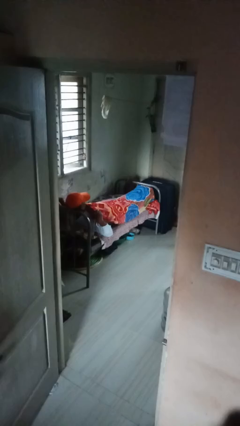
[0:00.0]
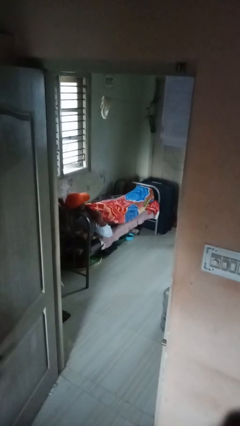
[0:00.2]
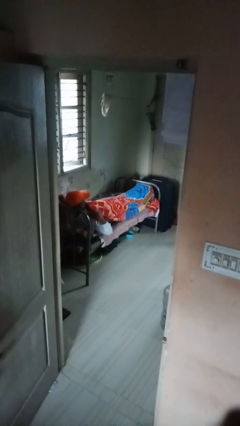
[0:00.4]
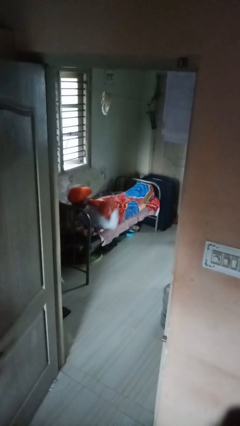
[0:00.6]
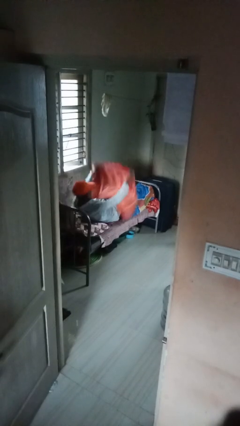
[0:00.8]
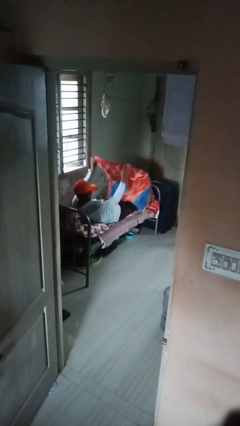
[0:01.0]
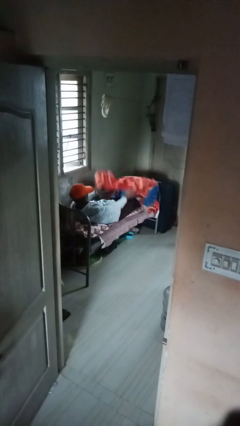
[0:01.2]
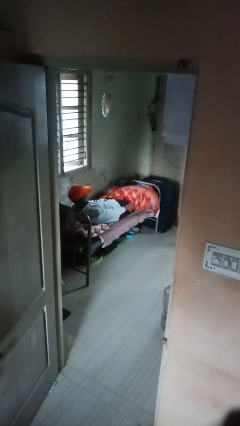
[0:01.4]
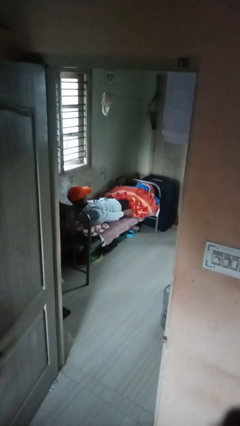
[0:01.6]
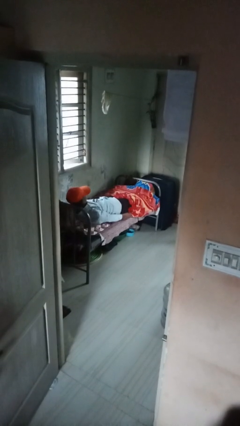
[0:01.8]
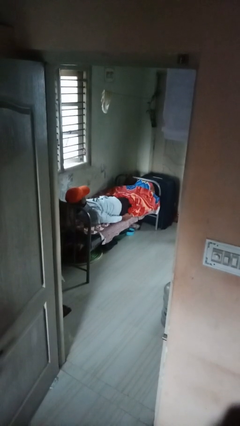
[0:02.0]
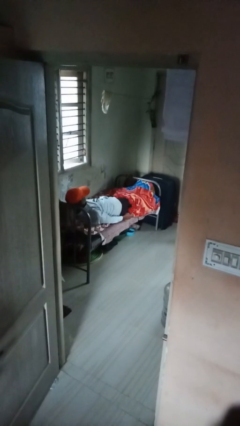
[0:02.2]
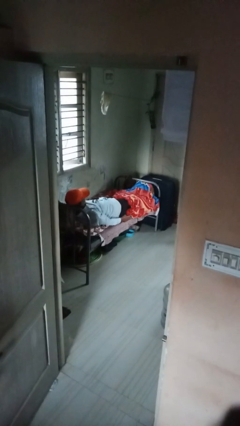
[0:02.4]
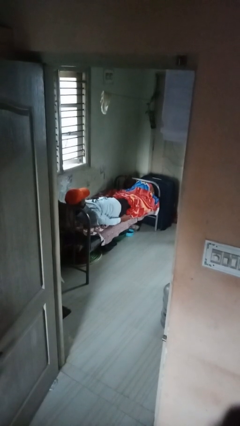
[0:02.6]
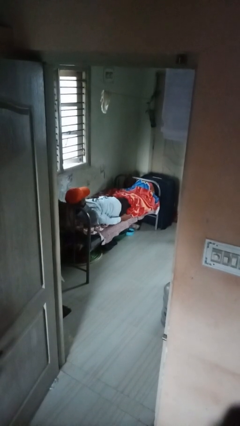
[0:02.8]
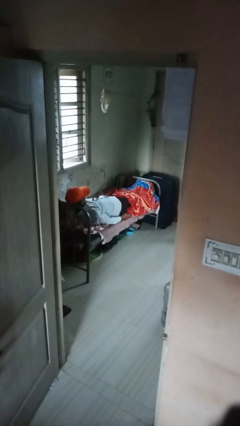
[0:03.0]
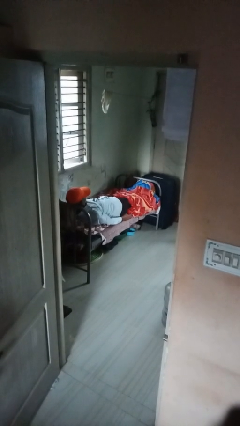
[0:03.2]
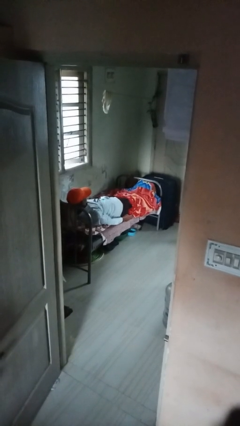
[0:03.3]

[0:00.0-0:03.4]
person uncovers with bedsheets

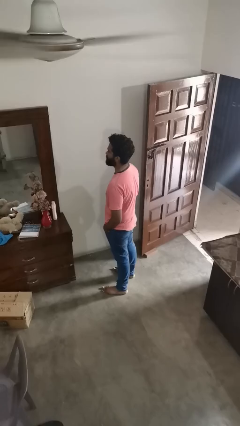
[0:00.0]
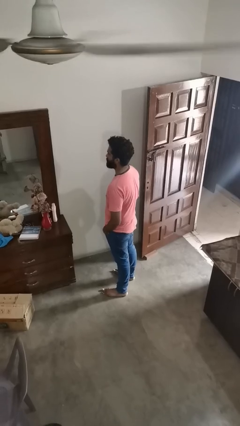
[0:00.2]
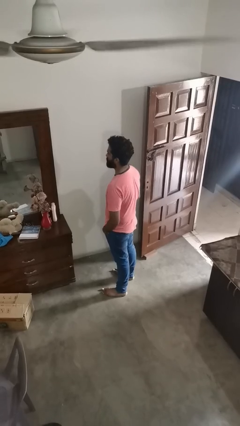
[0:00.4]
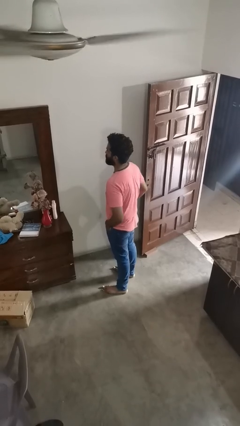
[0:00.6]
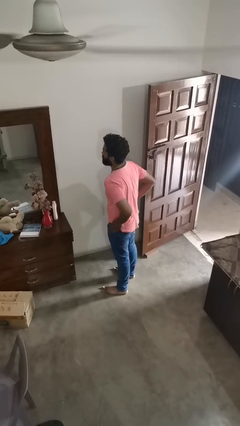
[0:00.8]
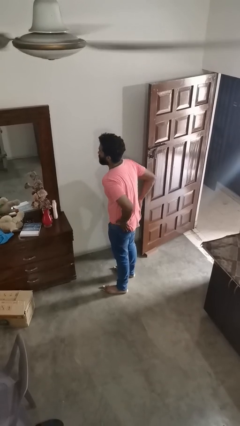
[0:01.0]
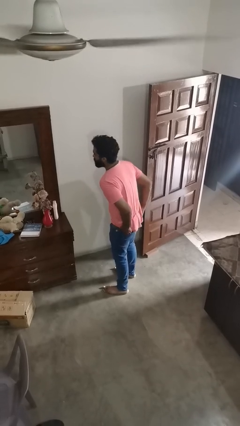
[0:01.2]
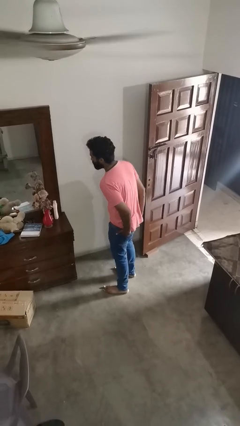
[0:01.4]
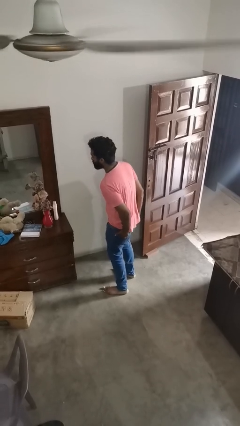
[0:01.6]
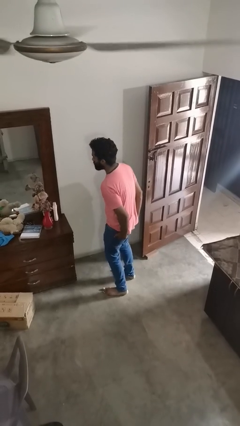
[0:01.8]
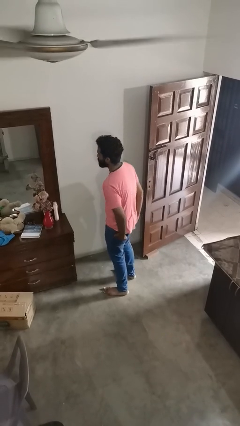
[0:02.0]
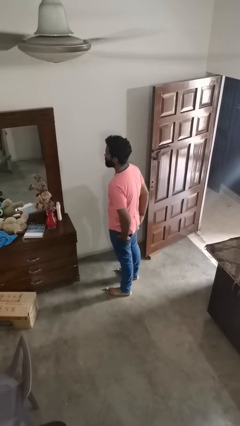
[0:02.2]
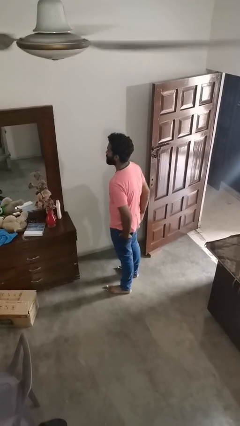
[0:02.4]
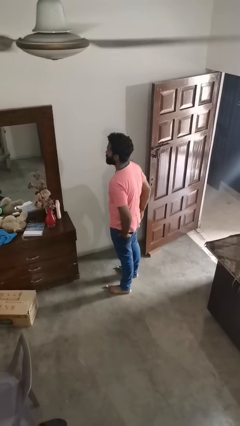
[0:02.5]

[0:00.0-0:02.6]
person puts hands in back pockets

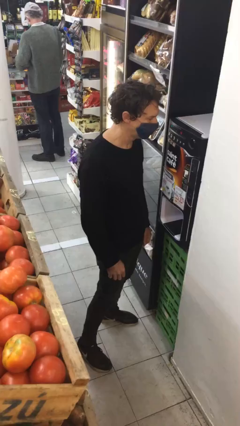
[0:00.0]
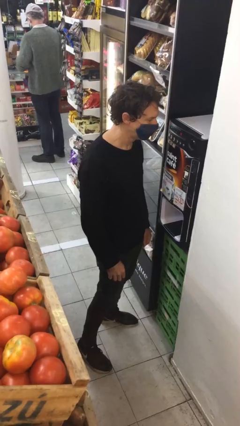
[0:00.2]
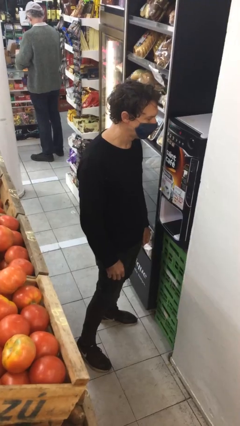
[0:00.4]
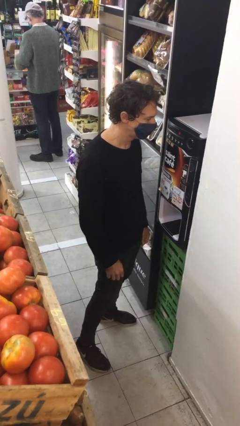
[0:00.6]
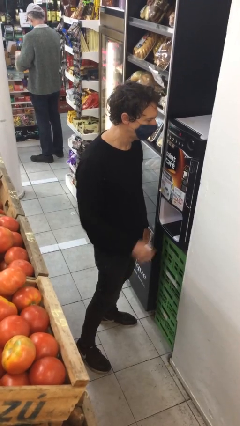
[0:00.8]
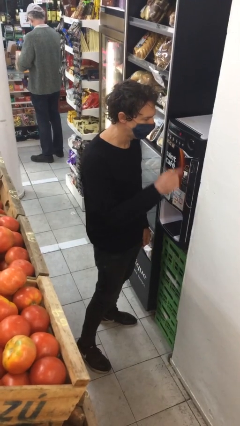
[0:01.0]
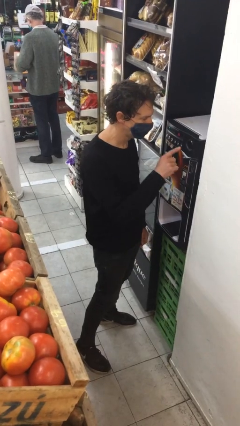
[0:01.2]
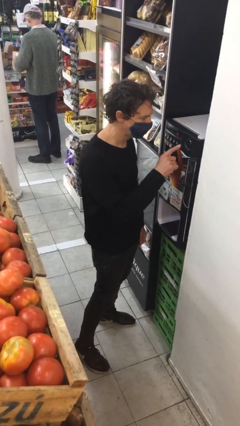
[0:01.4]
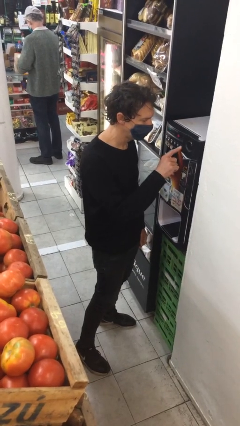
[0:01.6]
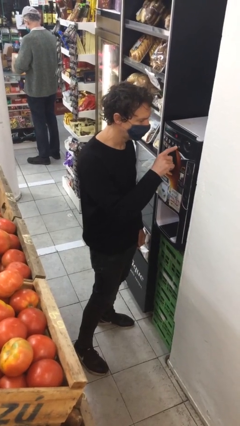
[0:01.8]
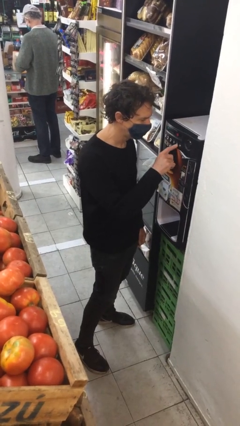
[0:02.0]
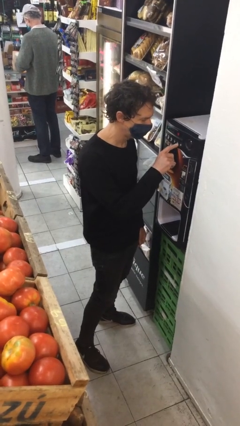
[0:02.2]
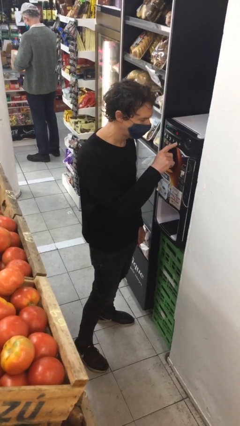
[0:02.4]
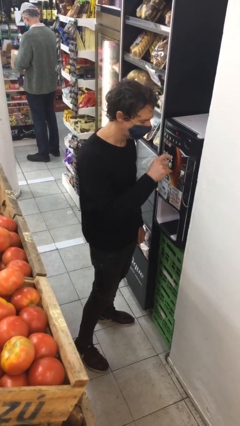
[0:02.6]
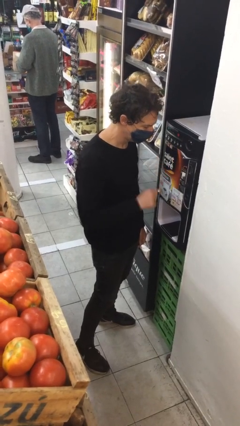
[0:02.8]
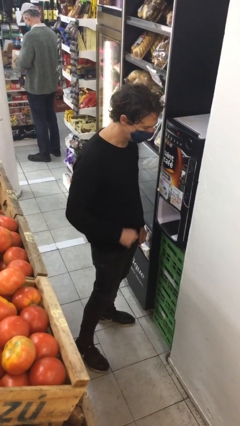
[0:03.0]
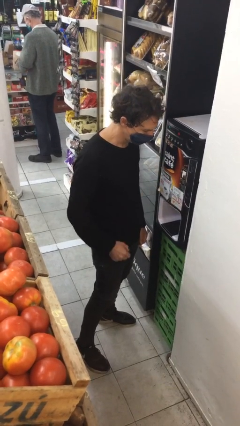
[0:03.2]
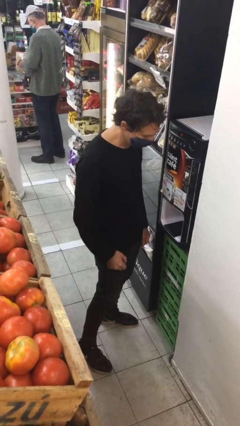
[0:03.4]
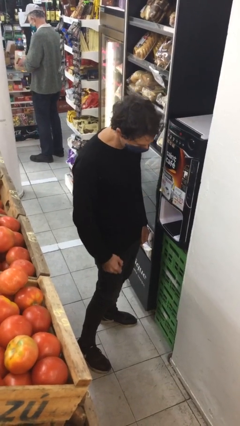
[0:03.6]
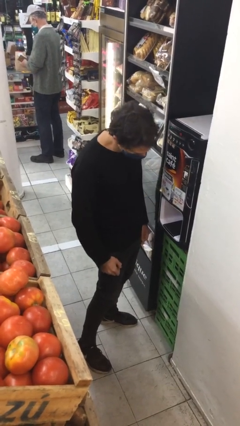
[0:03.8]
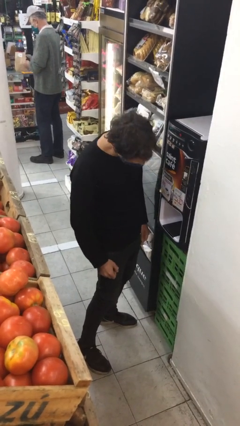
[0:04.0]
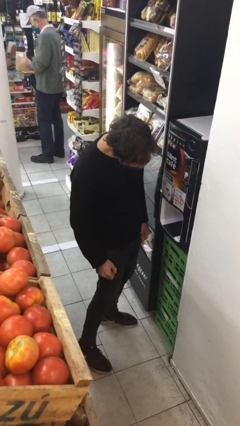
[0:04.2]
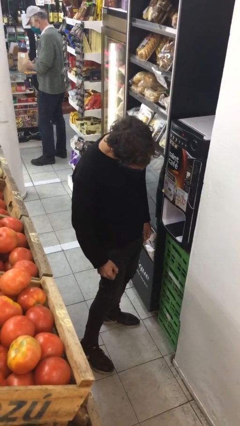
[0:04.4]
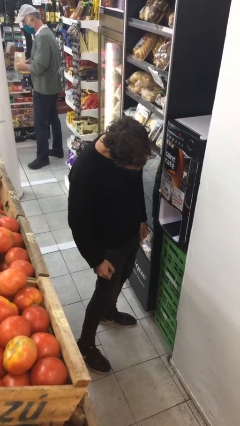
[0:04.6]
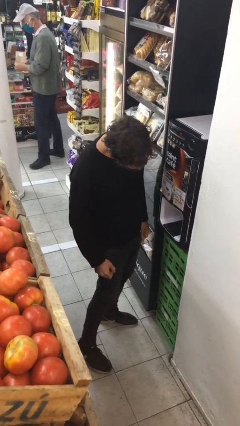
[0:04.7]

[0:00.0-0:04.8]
person purchases from machine

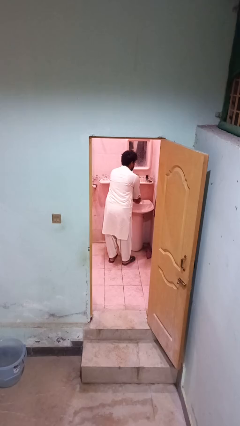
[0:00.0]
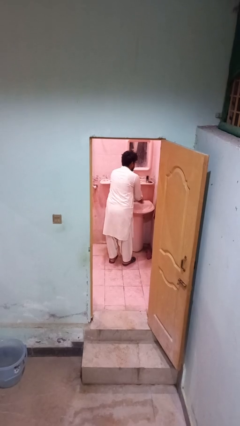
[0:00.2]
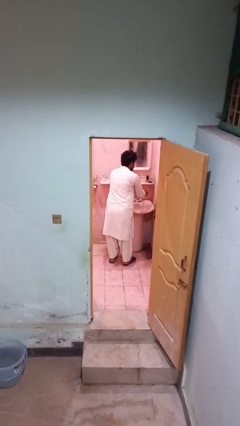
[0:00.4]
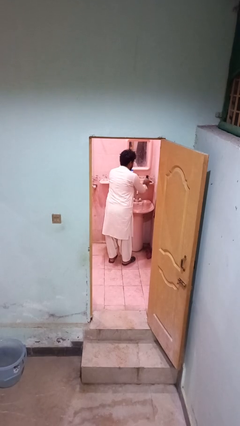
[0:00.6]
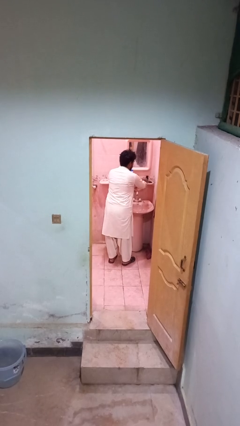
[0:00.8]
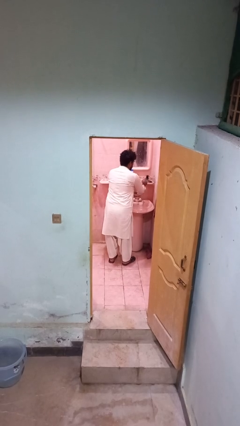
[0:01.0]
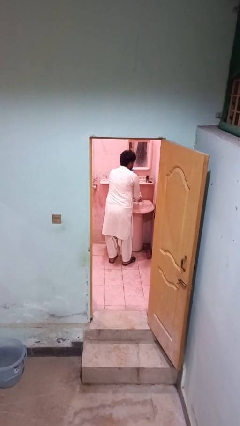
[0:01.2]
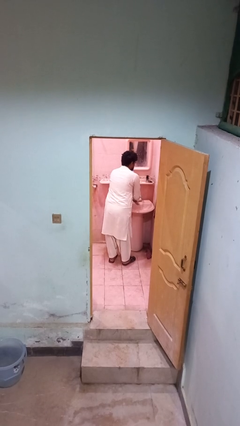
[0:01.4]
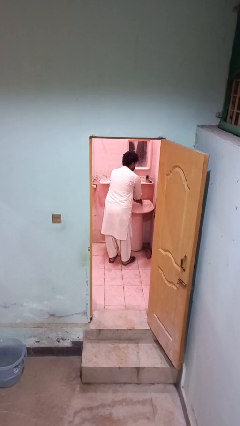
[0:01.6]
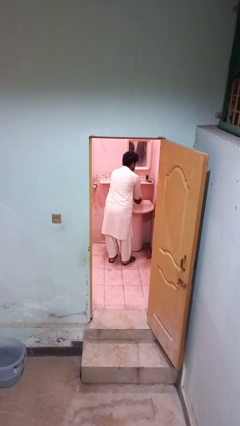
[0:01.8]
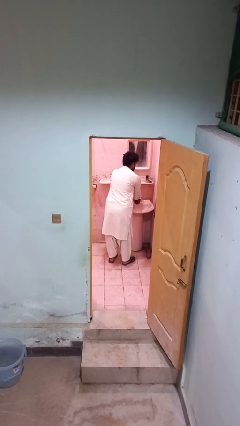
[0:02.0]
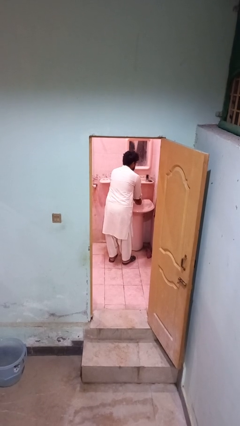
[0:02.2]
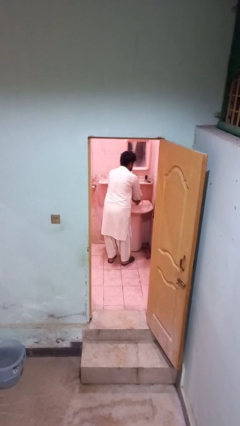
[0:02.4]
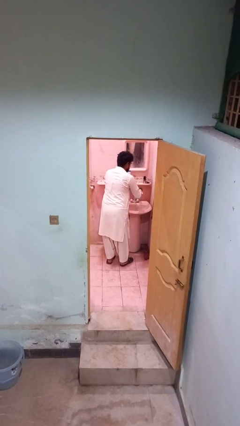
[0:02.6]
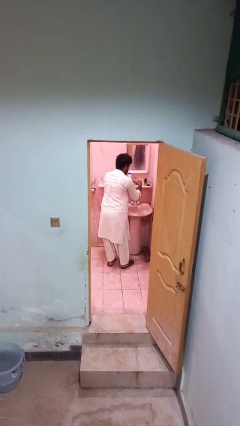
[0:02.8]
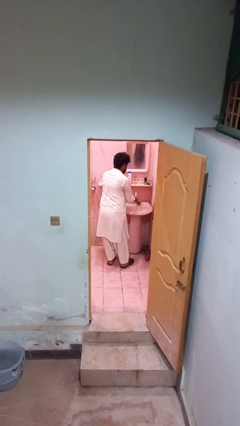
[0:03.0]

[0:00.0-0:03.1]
person washes hands

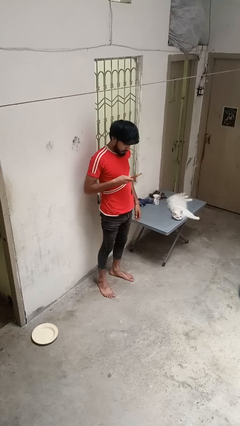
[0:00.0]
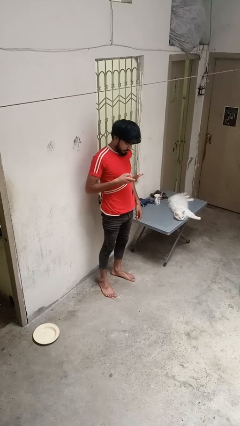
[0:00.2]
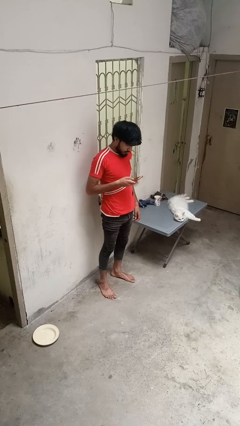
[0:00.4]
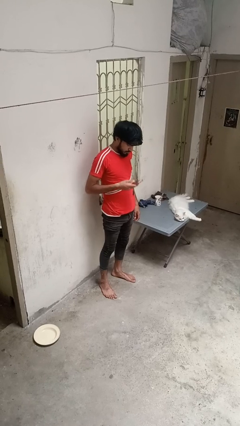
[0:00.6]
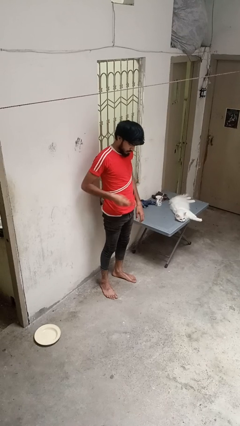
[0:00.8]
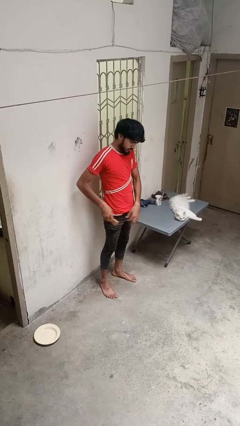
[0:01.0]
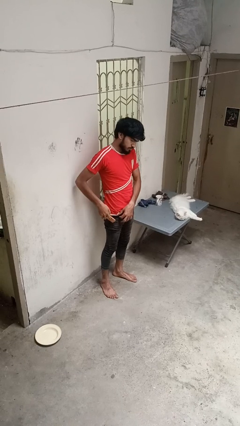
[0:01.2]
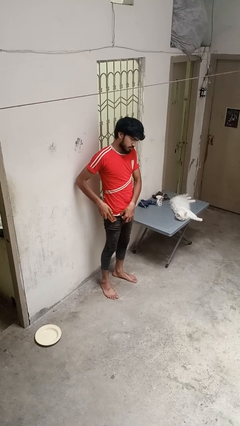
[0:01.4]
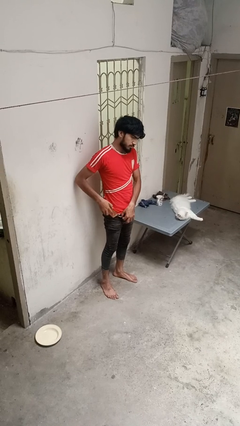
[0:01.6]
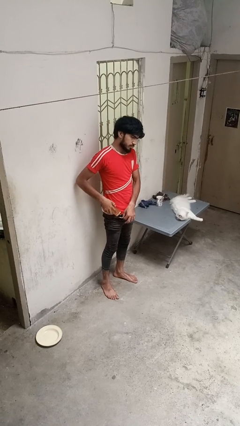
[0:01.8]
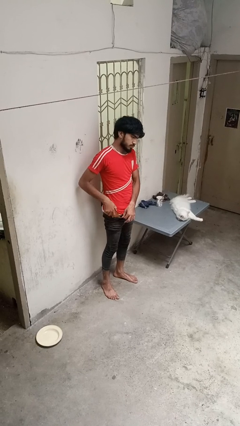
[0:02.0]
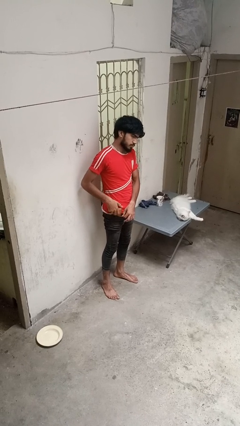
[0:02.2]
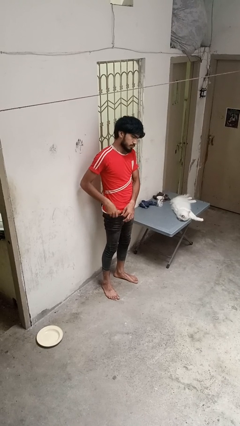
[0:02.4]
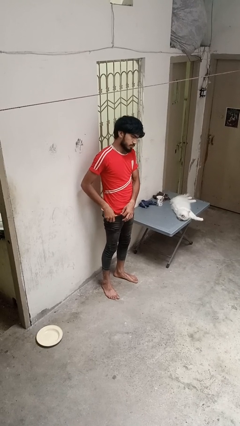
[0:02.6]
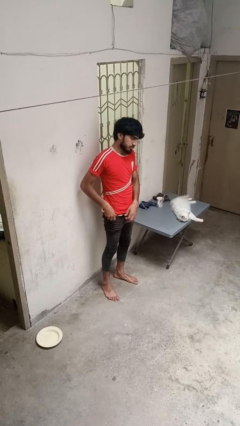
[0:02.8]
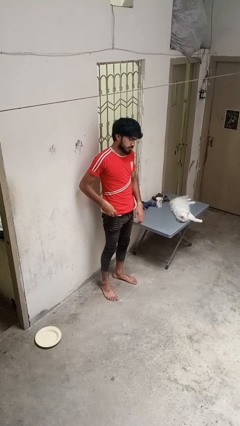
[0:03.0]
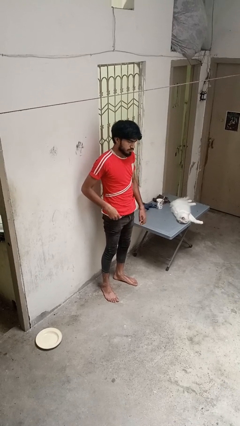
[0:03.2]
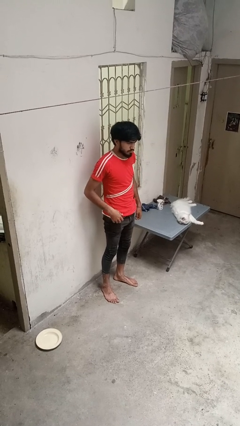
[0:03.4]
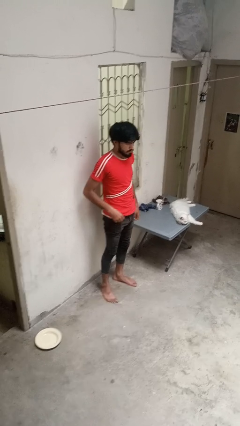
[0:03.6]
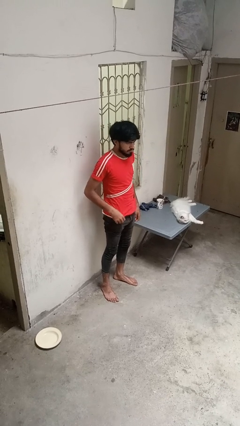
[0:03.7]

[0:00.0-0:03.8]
person puts phone into pocket
